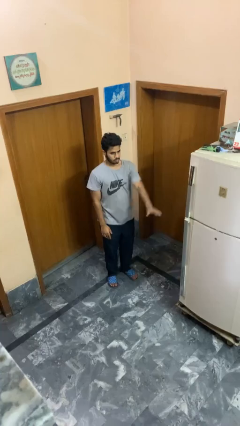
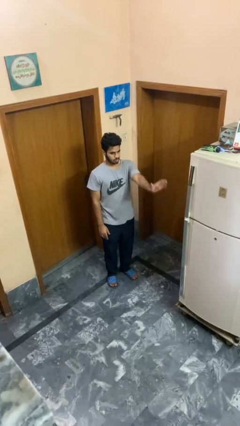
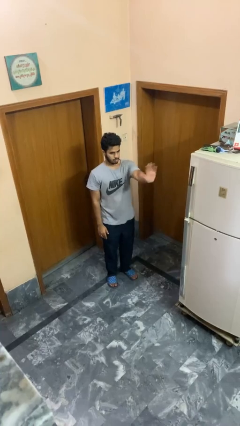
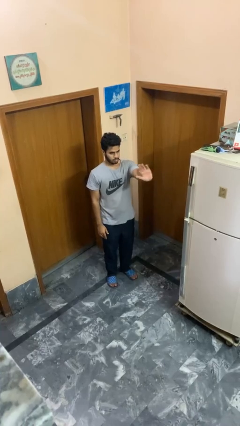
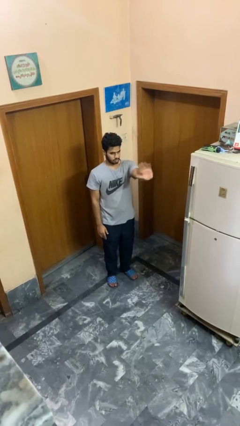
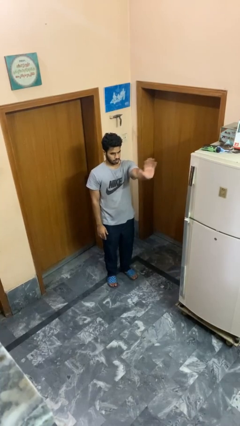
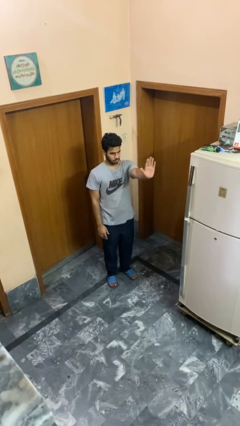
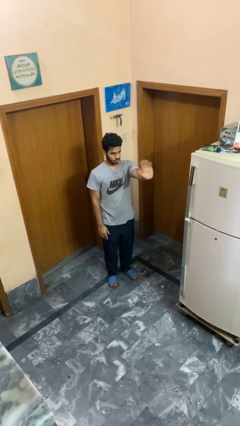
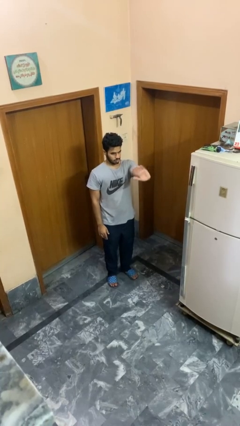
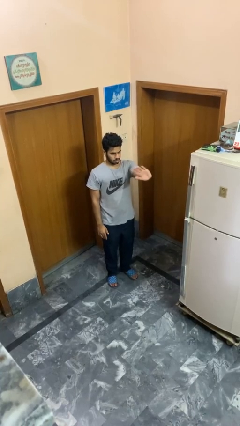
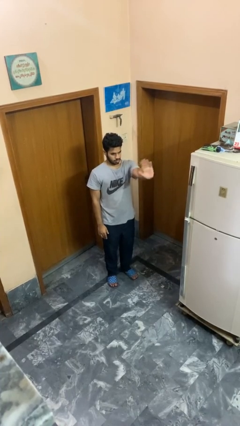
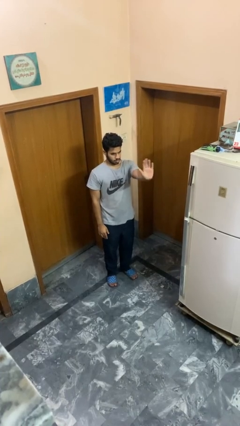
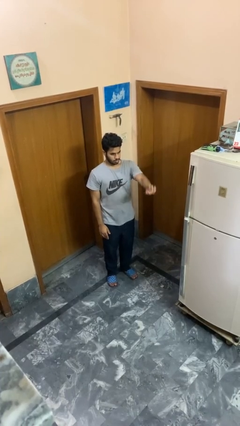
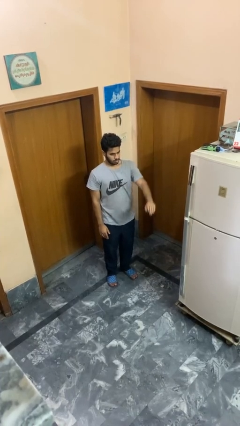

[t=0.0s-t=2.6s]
person waves at person

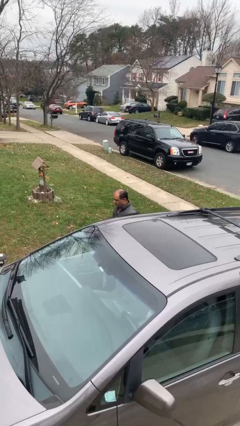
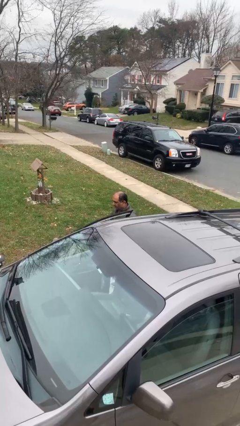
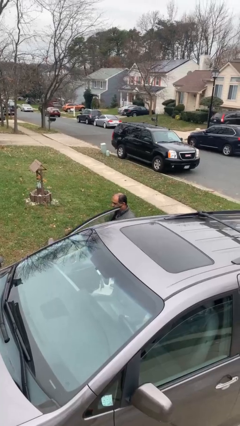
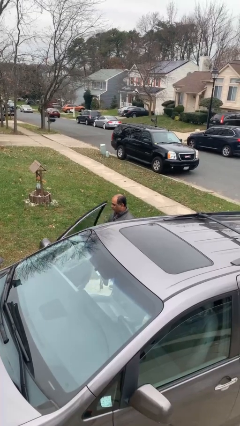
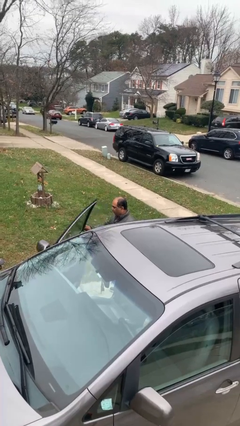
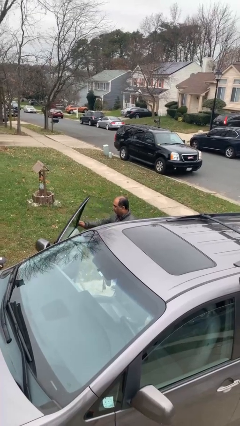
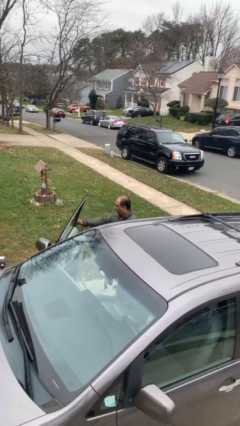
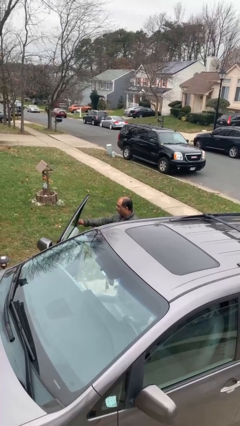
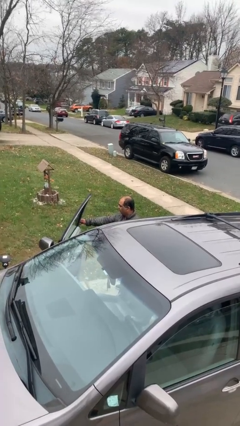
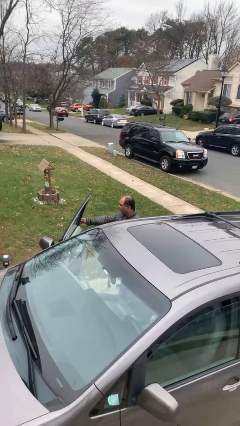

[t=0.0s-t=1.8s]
person opens car door

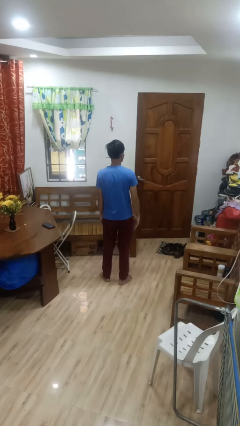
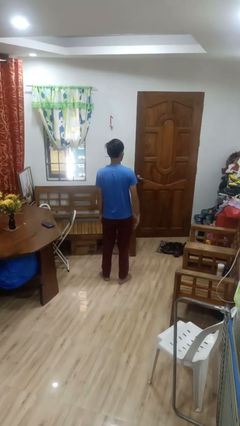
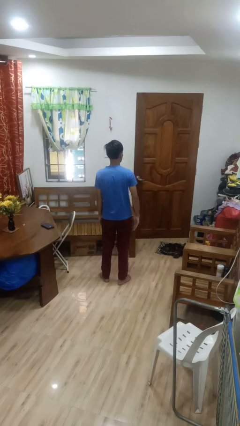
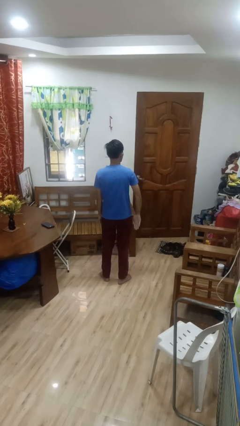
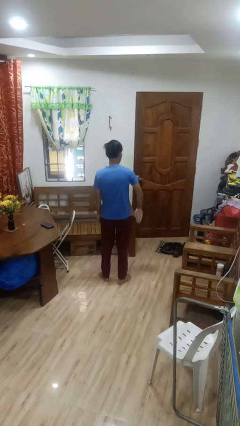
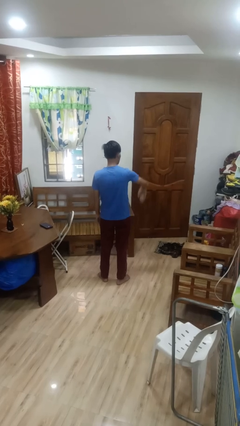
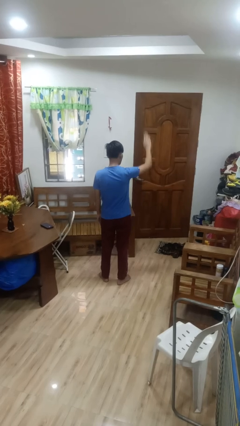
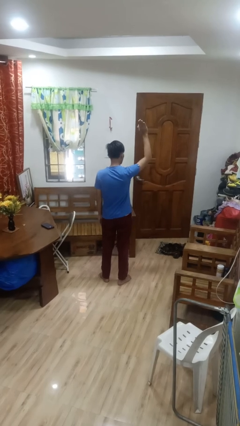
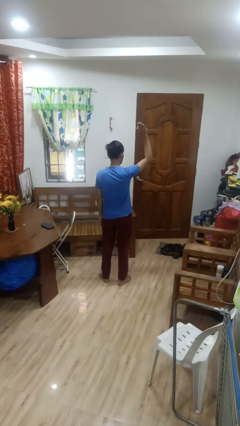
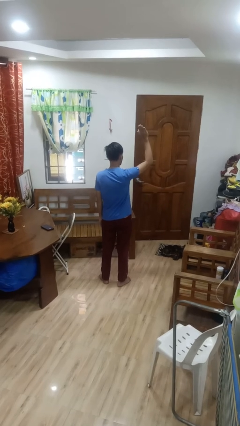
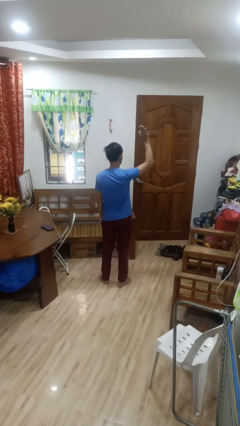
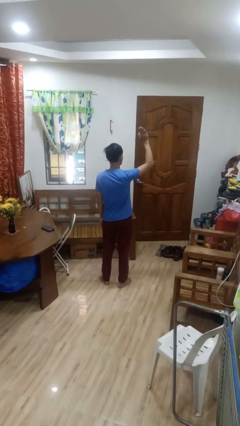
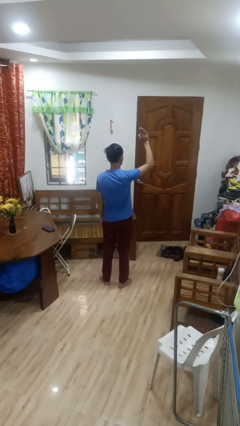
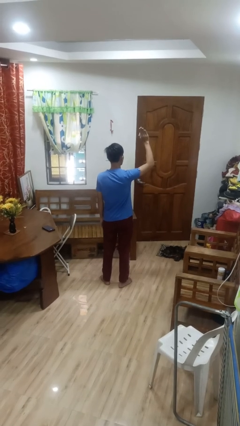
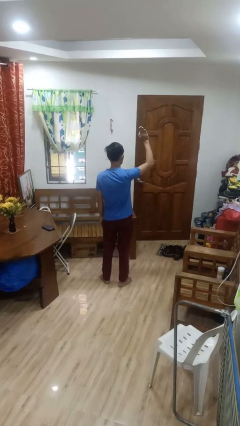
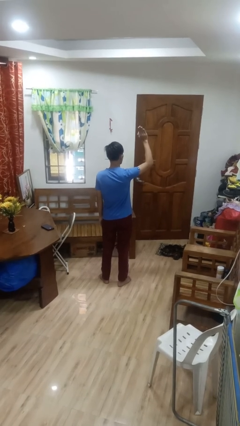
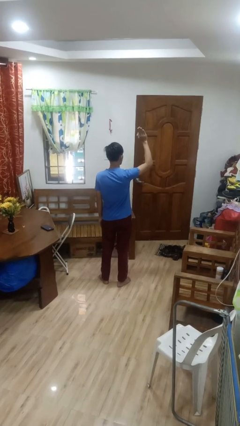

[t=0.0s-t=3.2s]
person gestures swipe up

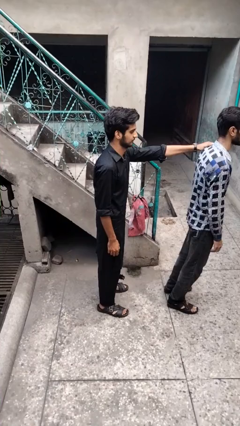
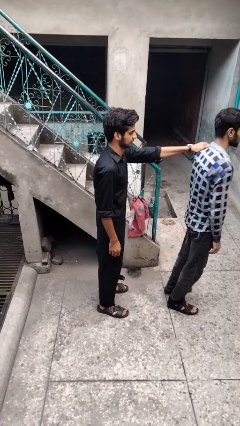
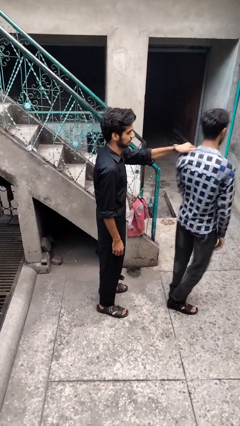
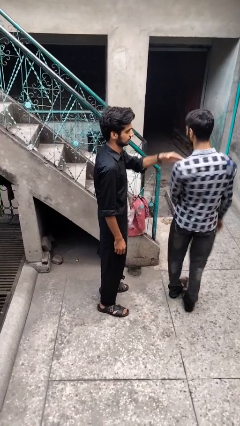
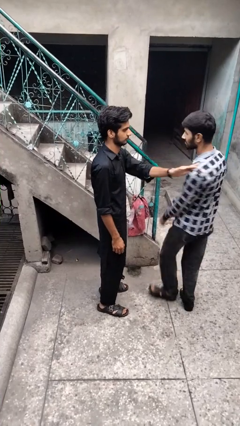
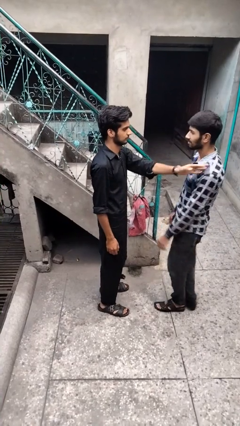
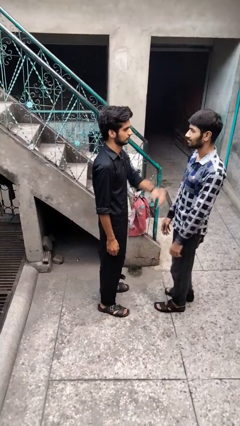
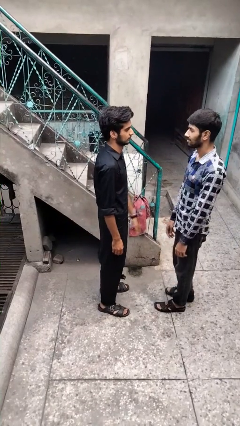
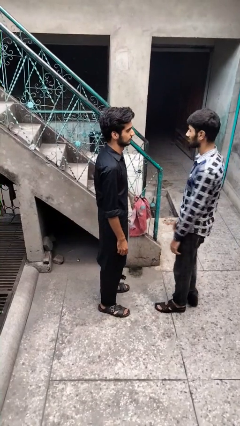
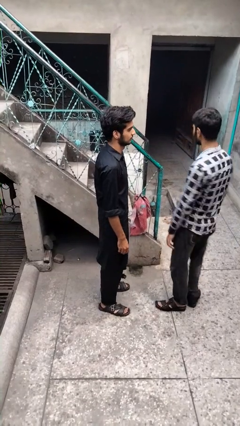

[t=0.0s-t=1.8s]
person spins person around

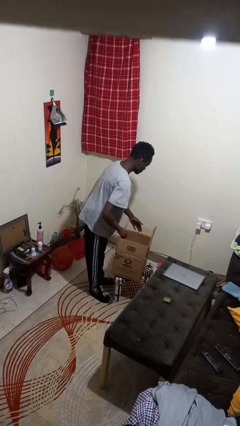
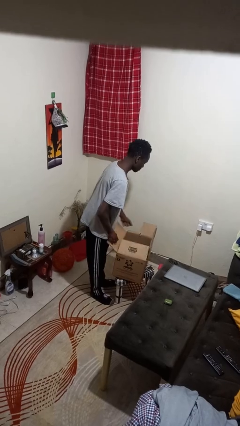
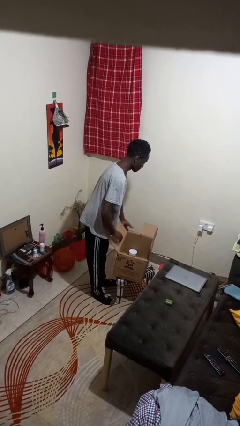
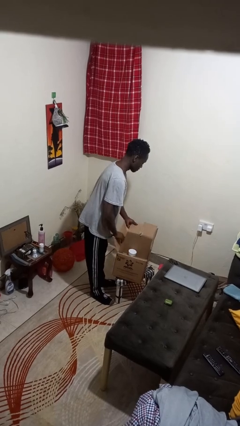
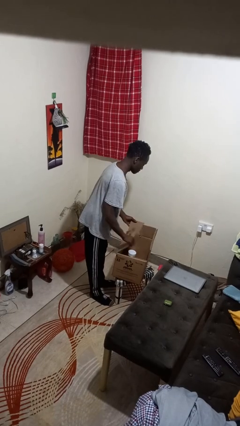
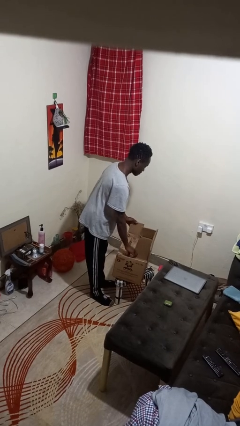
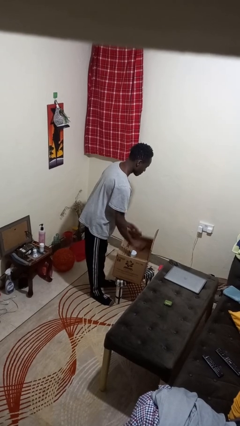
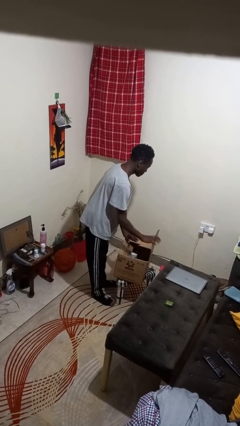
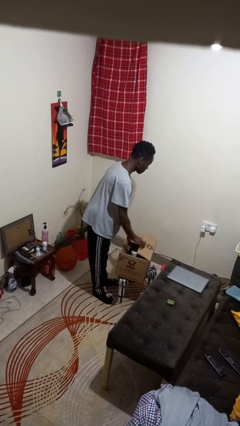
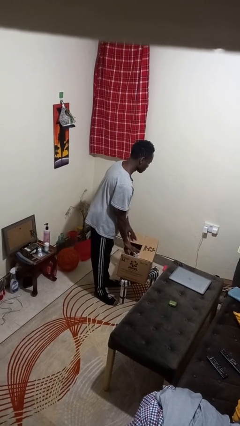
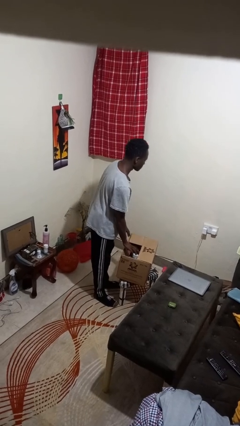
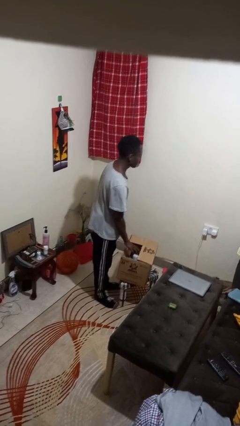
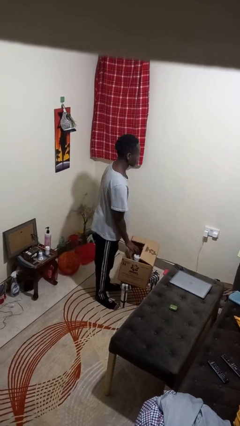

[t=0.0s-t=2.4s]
person closes box

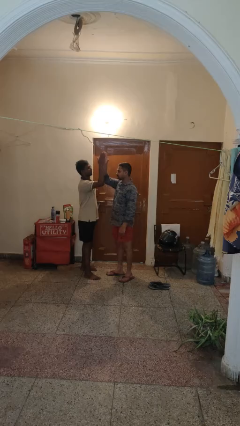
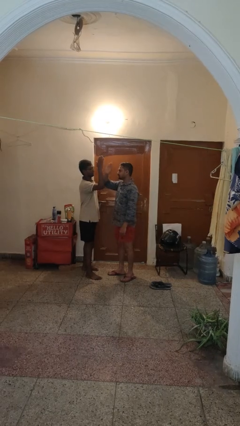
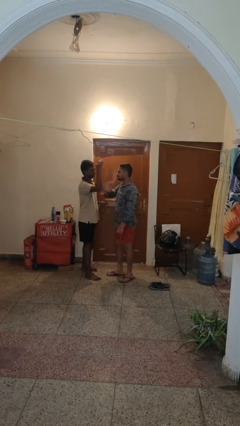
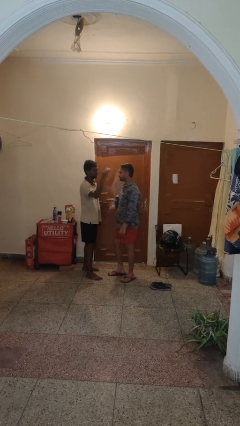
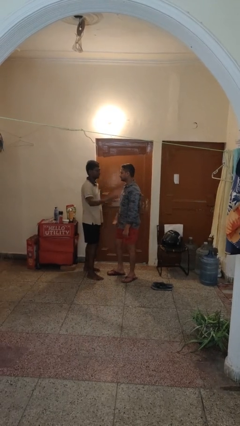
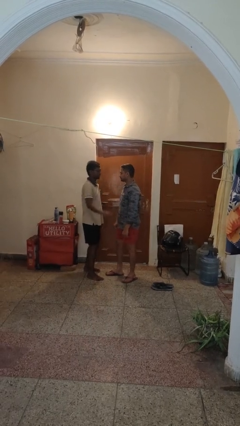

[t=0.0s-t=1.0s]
person highfives hand

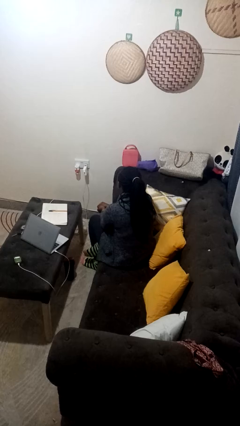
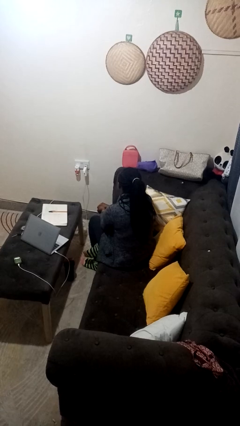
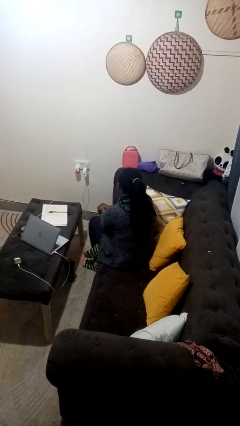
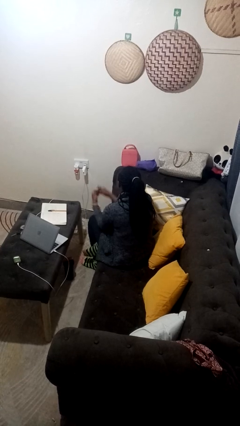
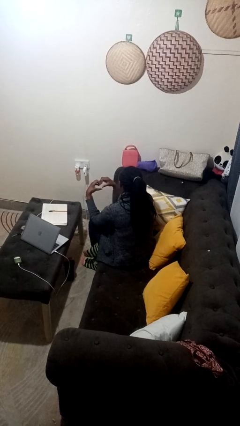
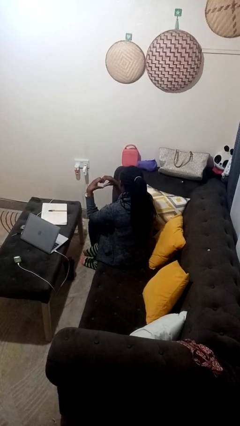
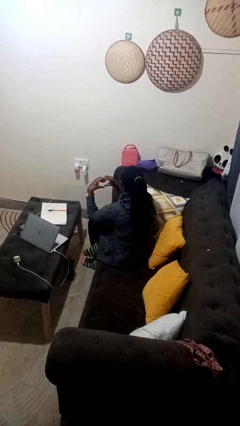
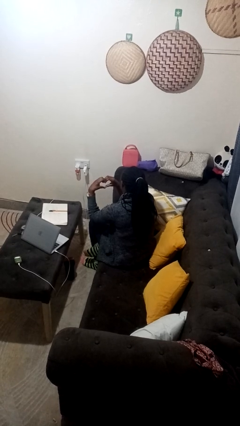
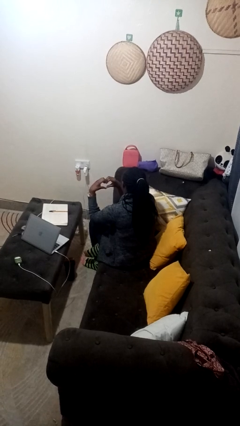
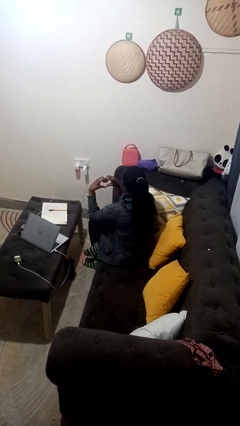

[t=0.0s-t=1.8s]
person gestures heart

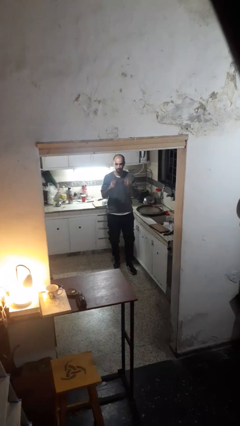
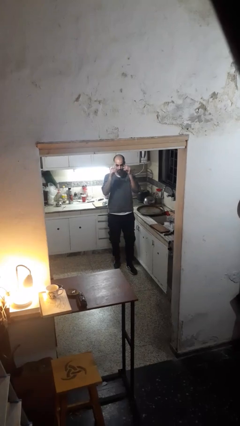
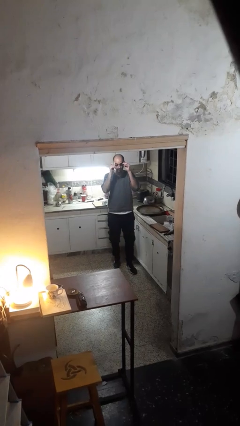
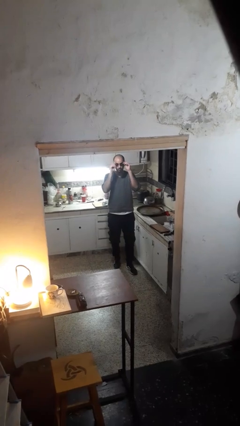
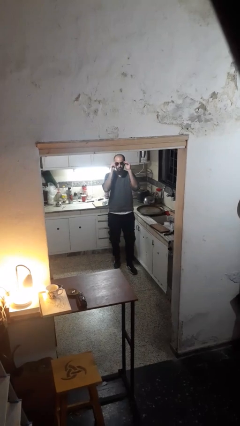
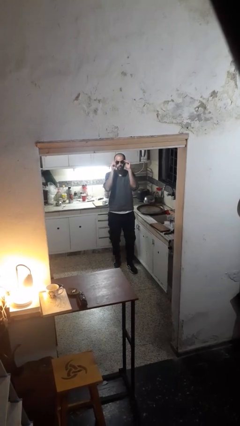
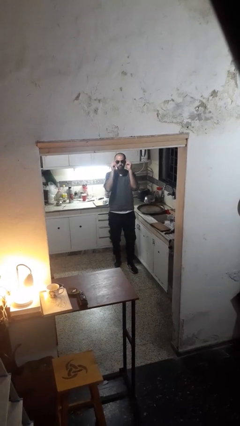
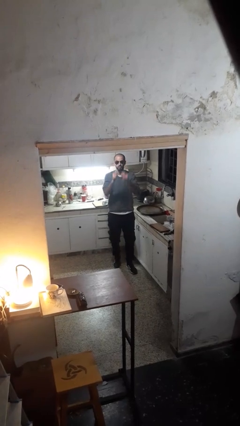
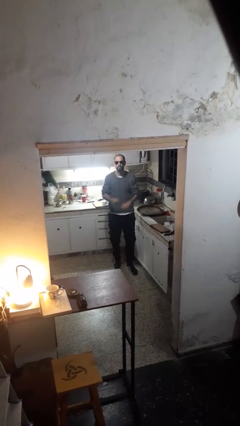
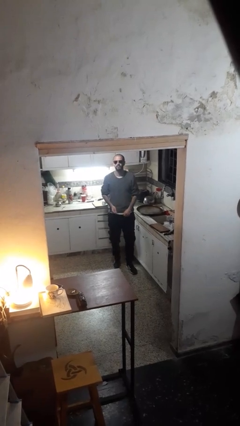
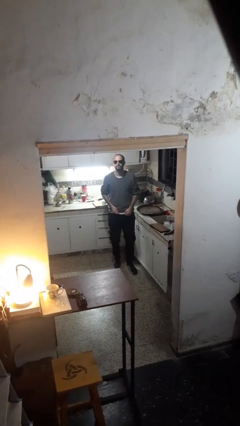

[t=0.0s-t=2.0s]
person puts on sunglasses

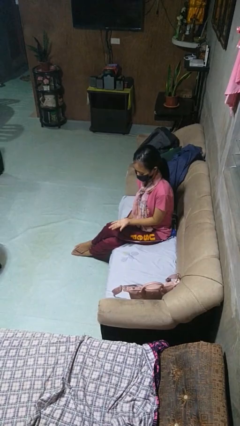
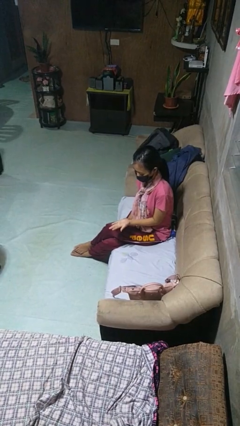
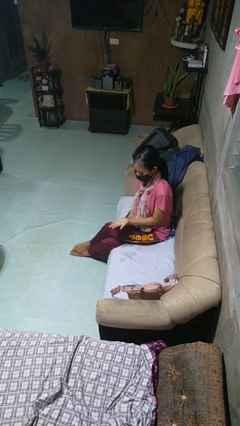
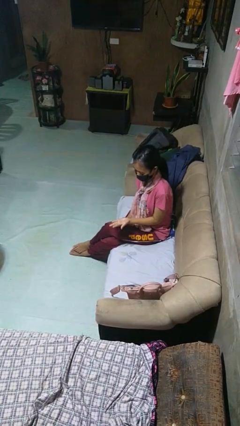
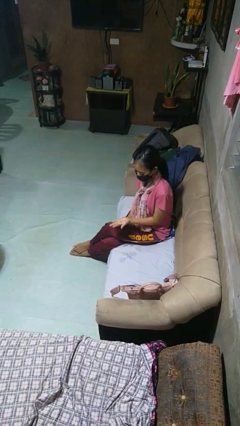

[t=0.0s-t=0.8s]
person takes off ring
